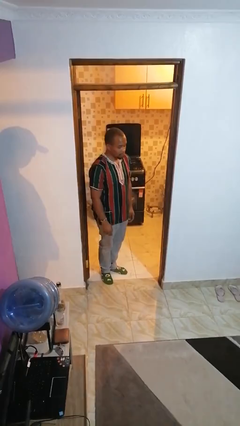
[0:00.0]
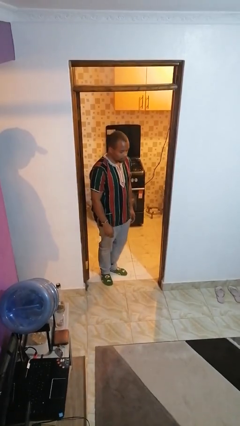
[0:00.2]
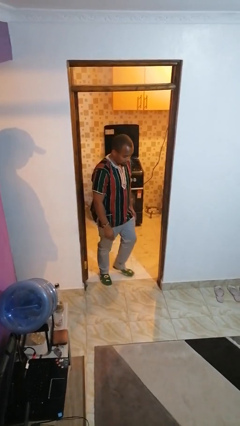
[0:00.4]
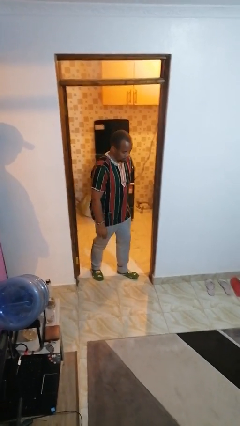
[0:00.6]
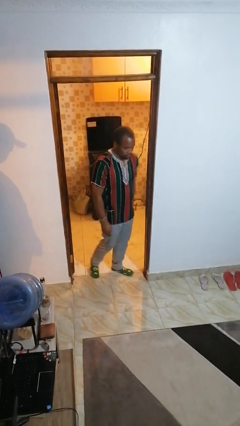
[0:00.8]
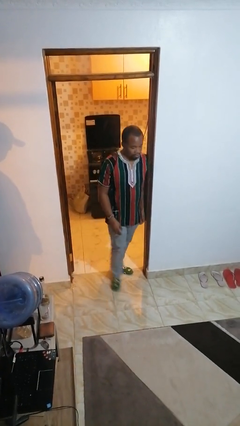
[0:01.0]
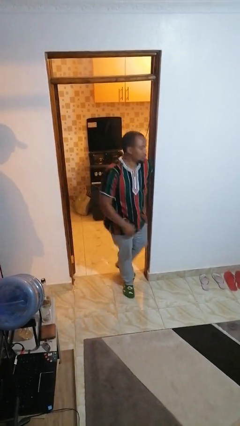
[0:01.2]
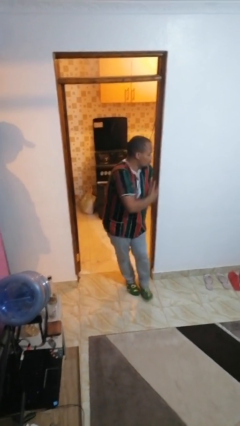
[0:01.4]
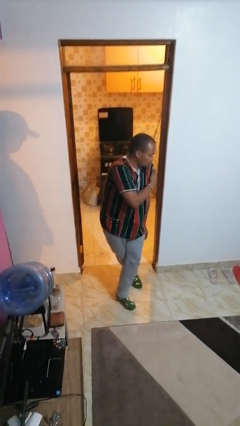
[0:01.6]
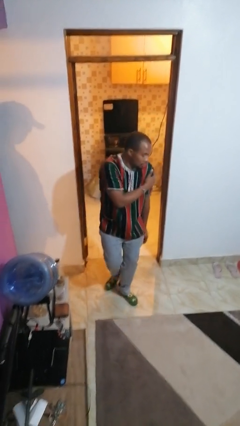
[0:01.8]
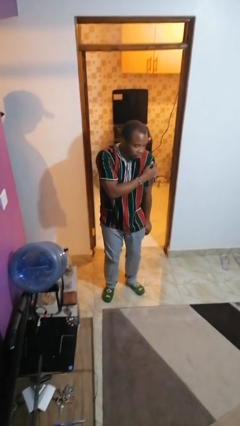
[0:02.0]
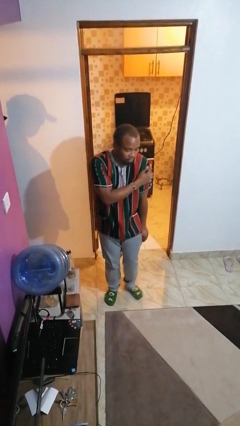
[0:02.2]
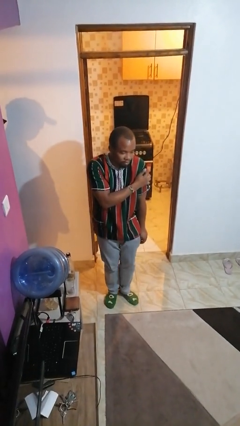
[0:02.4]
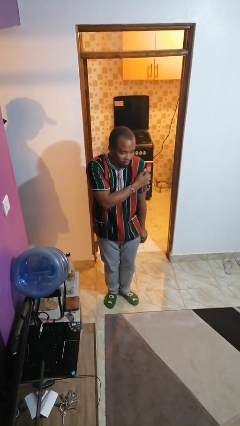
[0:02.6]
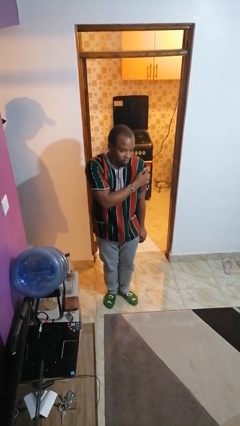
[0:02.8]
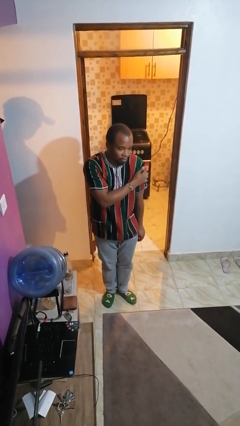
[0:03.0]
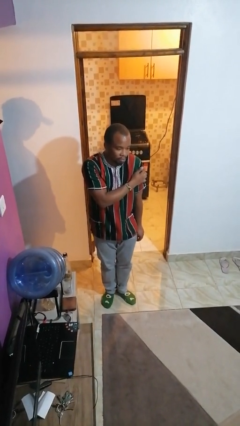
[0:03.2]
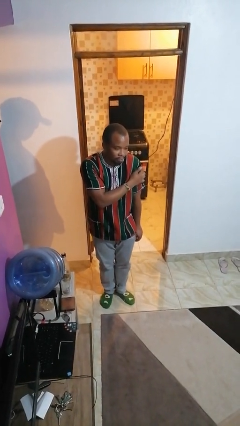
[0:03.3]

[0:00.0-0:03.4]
person bumps into wall

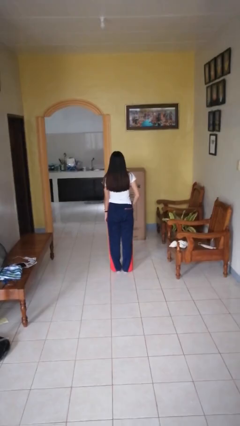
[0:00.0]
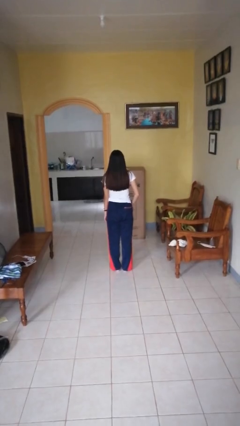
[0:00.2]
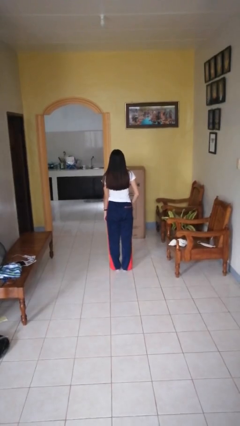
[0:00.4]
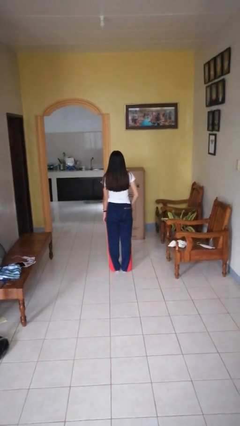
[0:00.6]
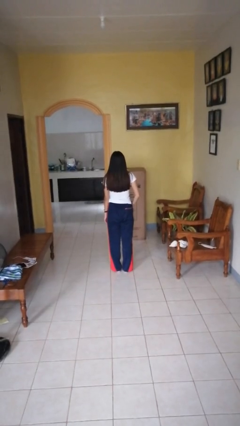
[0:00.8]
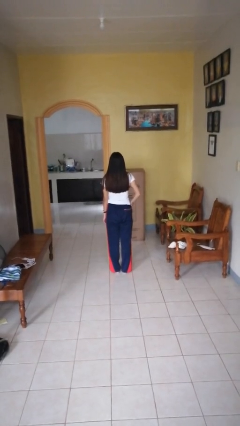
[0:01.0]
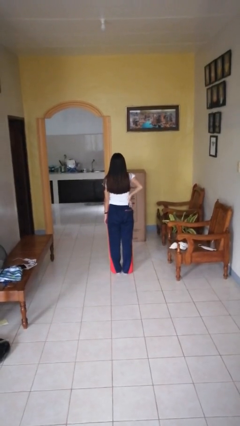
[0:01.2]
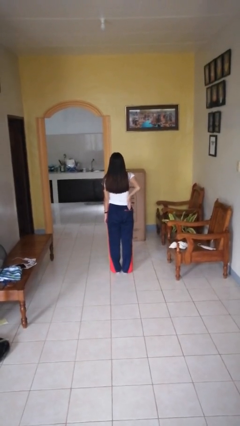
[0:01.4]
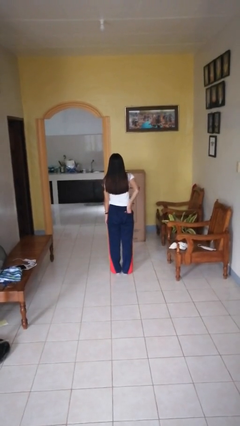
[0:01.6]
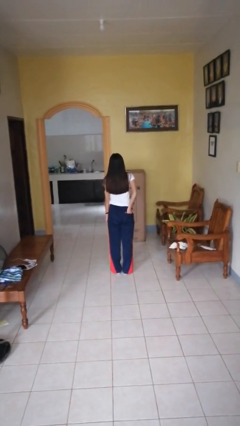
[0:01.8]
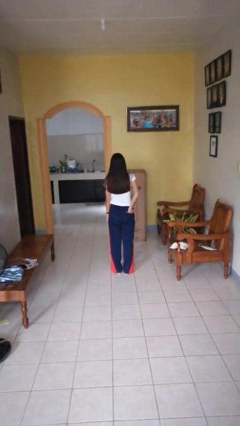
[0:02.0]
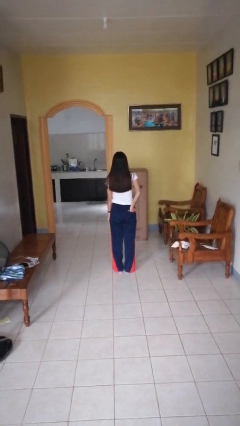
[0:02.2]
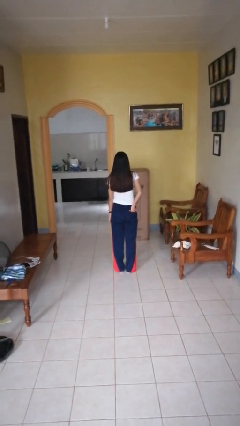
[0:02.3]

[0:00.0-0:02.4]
person puts hands in back pockets

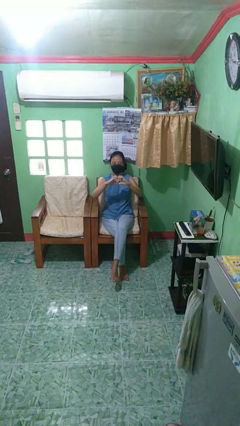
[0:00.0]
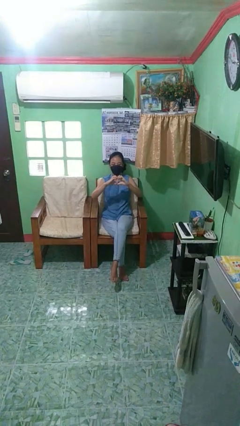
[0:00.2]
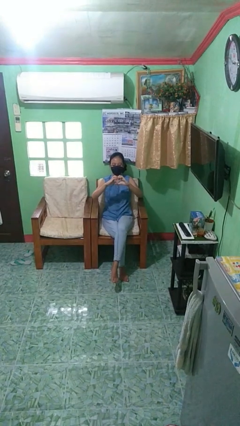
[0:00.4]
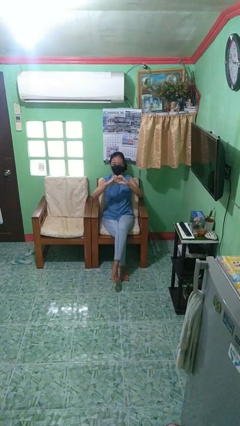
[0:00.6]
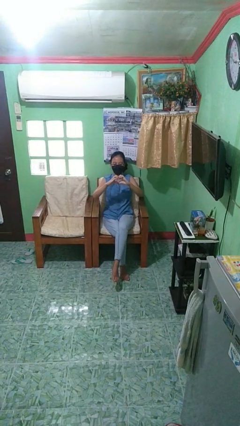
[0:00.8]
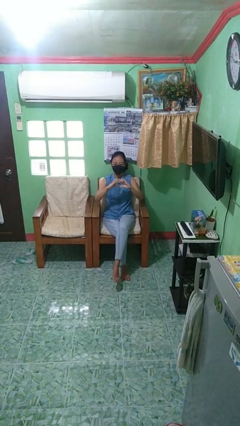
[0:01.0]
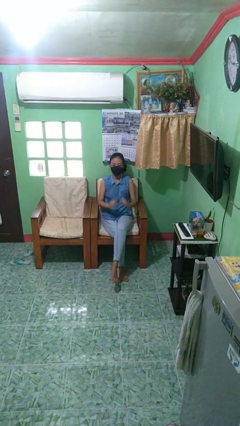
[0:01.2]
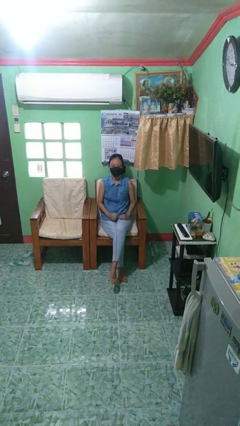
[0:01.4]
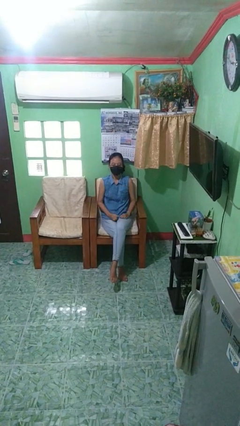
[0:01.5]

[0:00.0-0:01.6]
person gestures heart

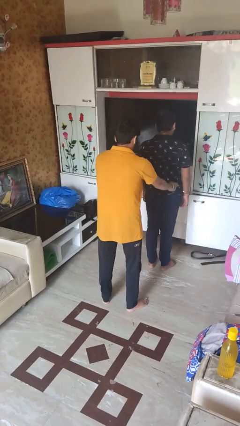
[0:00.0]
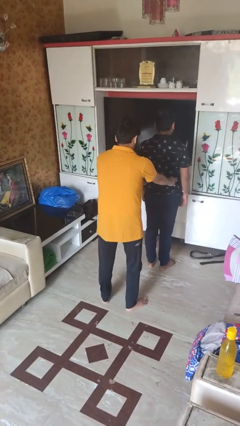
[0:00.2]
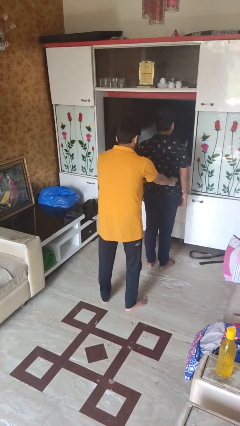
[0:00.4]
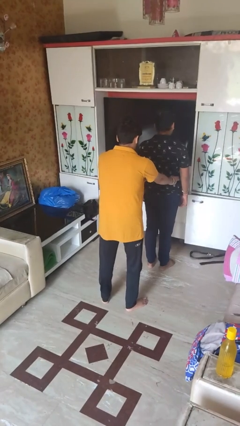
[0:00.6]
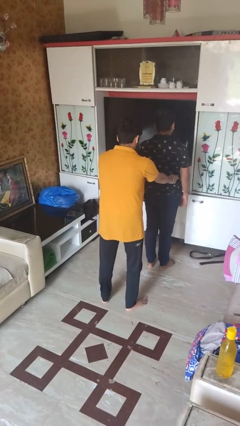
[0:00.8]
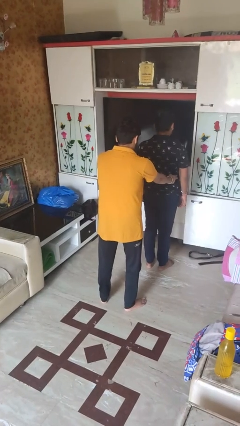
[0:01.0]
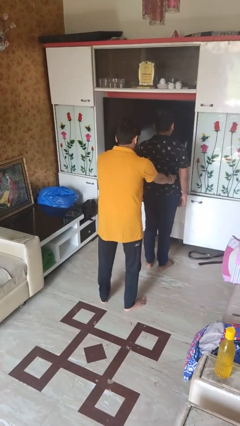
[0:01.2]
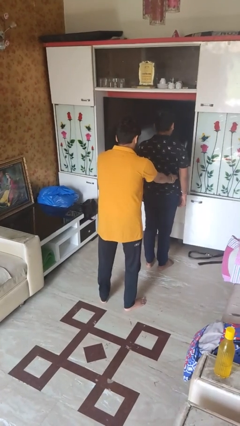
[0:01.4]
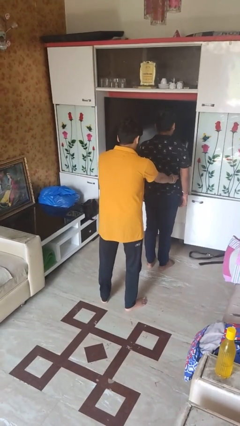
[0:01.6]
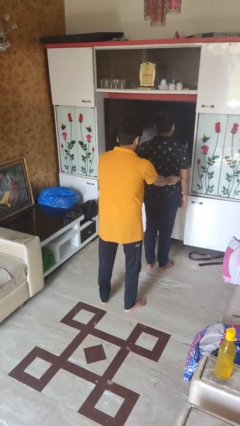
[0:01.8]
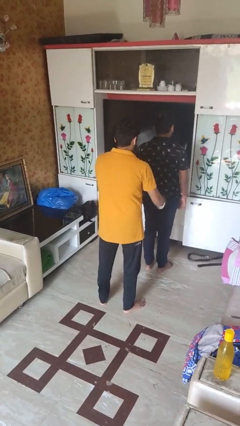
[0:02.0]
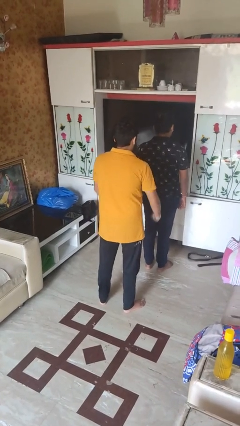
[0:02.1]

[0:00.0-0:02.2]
person tickles person

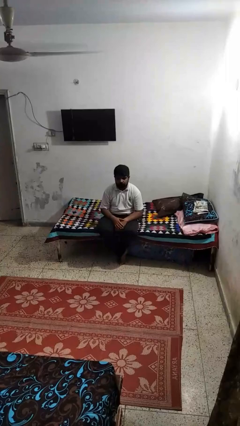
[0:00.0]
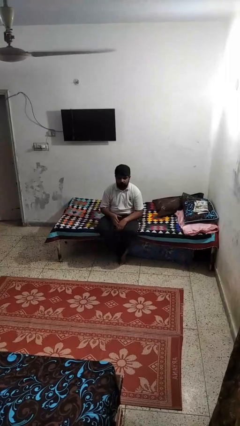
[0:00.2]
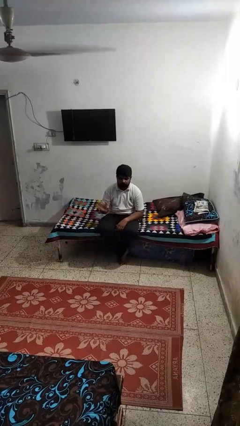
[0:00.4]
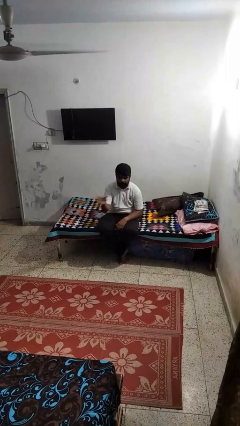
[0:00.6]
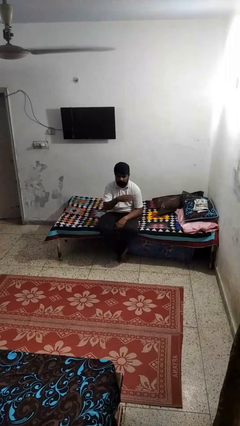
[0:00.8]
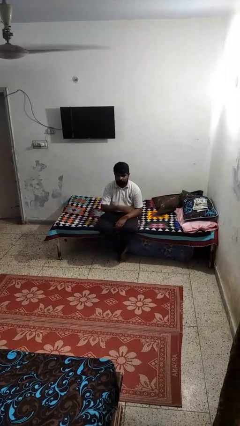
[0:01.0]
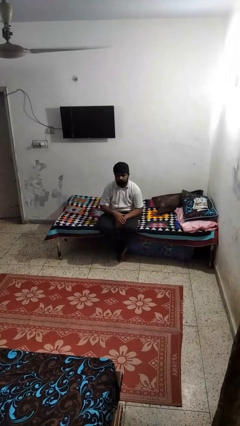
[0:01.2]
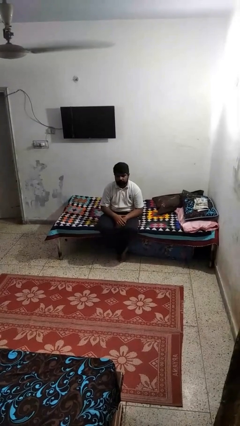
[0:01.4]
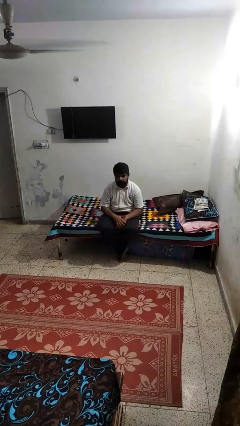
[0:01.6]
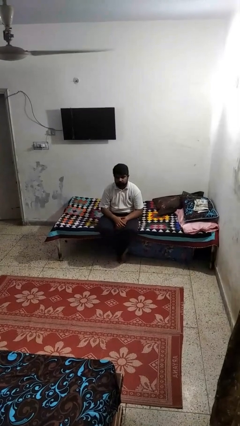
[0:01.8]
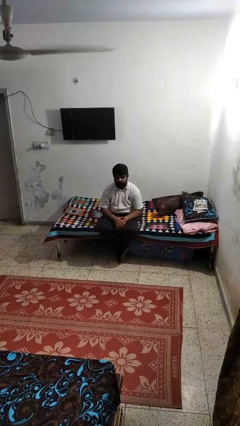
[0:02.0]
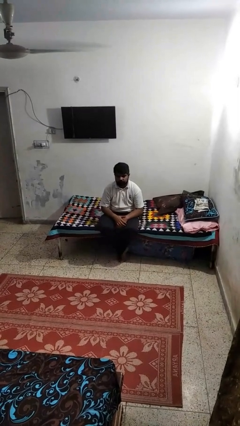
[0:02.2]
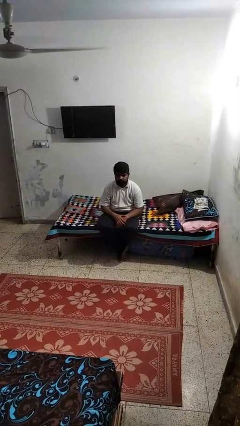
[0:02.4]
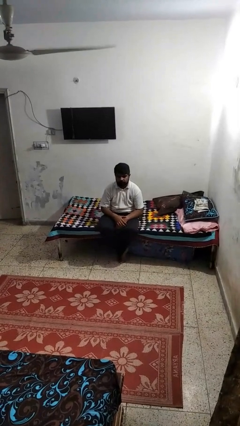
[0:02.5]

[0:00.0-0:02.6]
person gestures swipe left

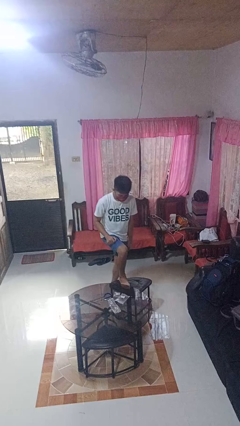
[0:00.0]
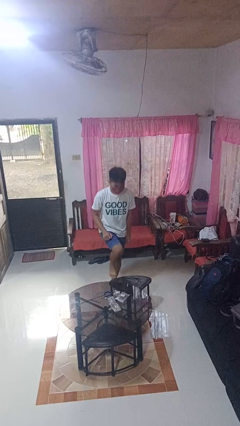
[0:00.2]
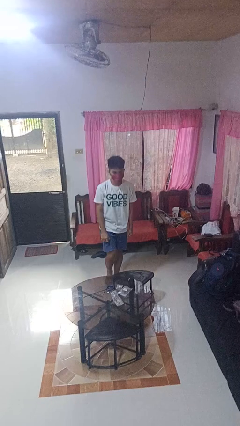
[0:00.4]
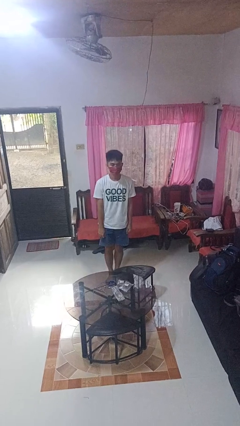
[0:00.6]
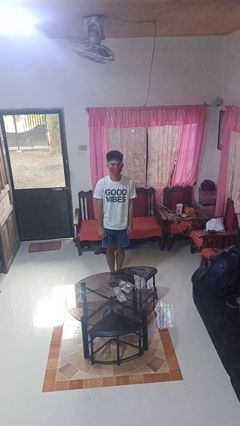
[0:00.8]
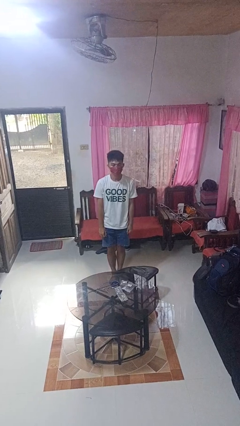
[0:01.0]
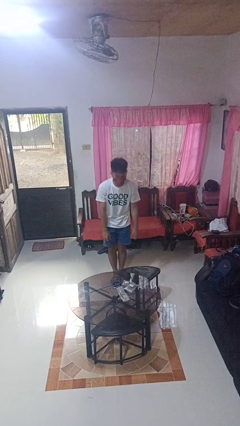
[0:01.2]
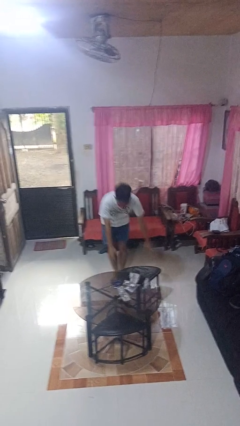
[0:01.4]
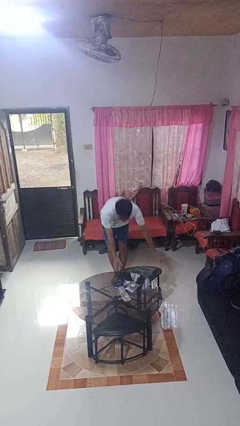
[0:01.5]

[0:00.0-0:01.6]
person climbs off chair

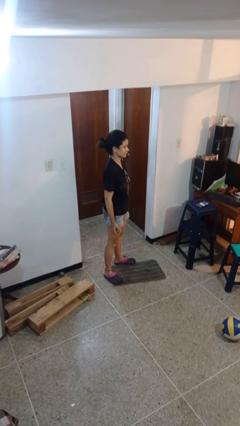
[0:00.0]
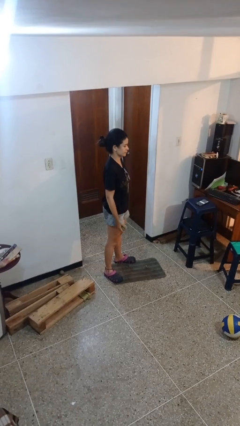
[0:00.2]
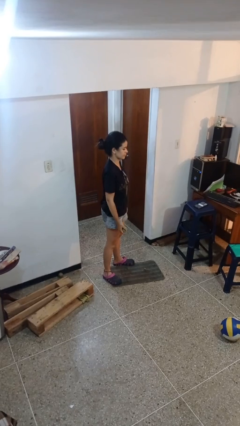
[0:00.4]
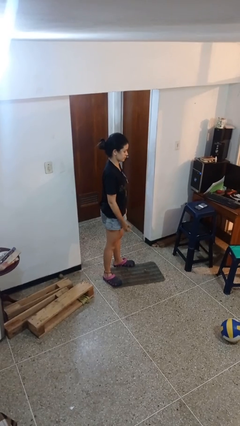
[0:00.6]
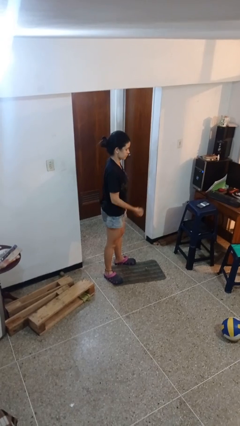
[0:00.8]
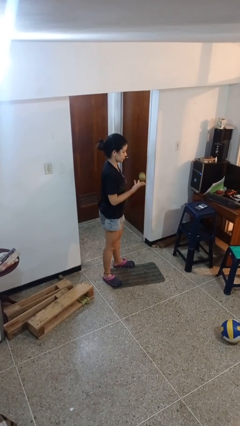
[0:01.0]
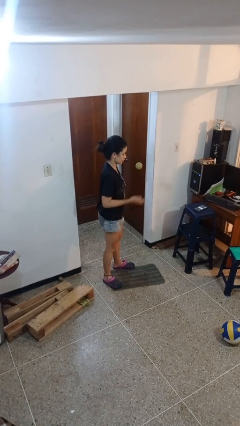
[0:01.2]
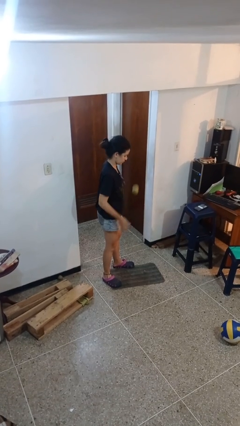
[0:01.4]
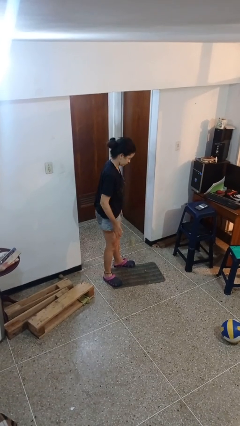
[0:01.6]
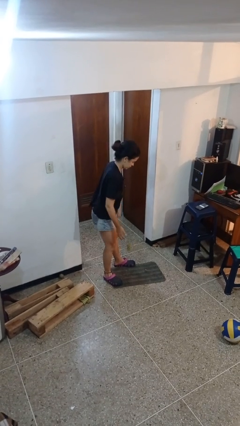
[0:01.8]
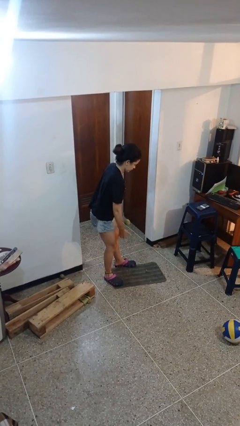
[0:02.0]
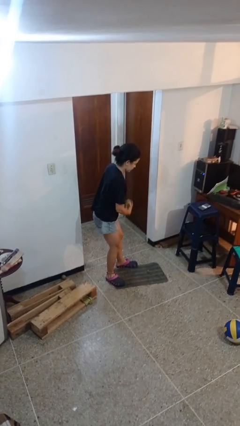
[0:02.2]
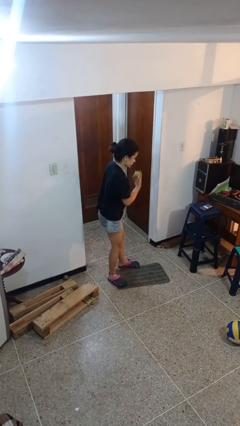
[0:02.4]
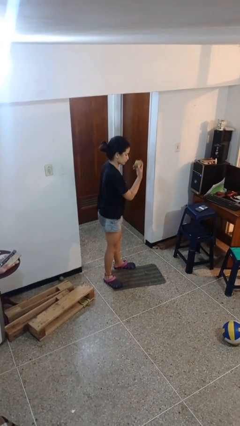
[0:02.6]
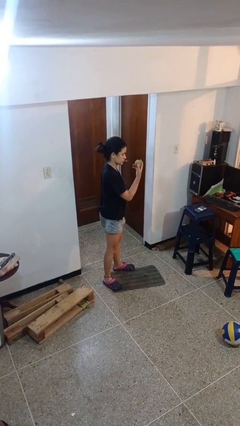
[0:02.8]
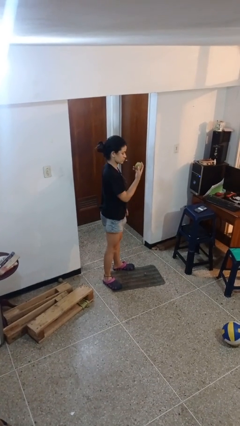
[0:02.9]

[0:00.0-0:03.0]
person bounces ball on floor

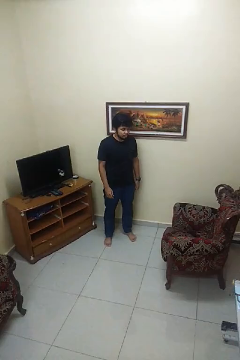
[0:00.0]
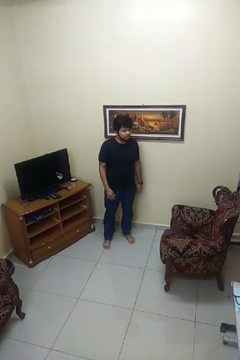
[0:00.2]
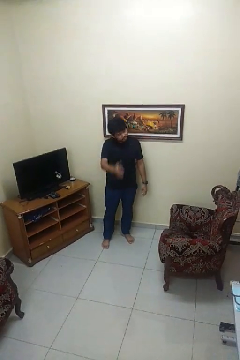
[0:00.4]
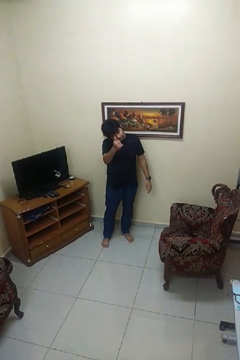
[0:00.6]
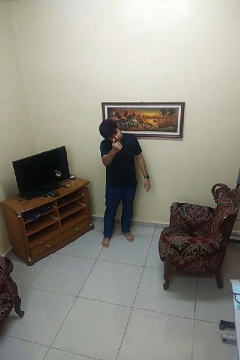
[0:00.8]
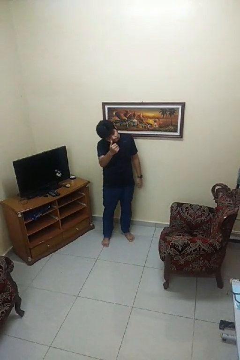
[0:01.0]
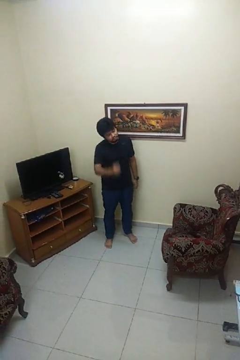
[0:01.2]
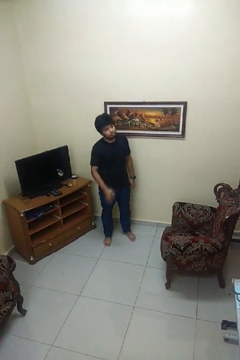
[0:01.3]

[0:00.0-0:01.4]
person gestures come here
